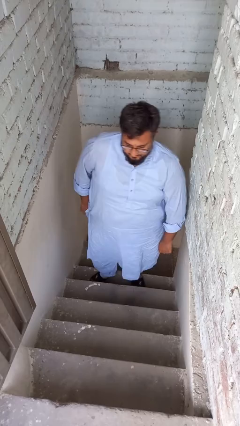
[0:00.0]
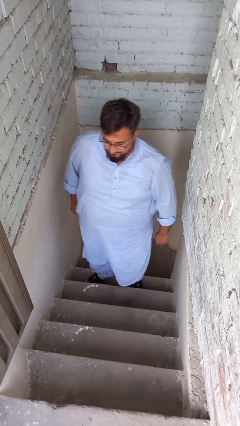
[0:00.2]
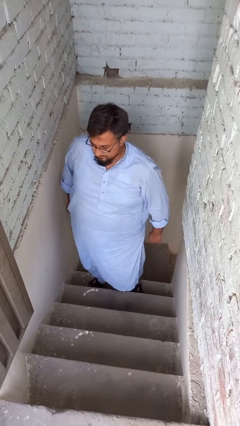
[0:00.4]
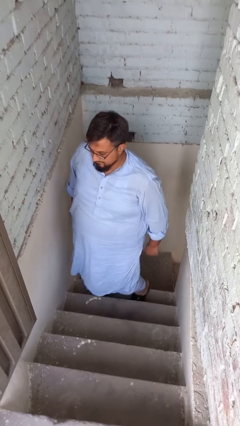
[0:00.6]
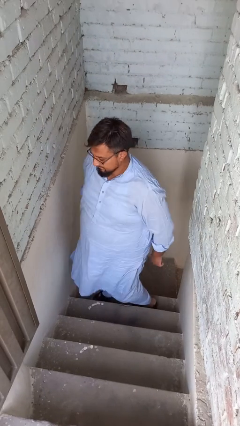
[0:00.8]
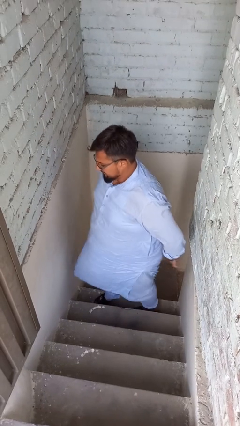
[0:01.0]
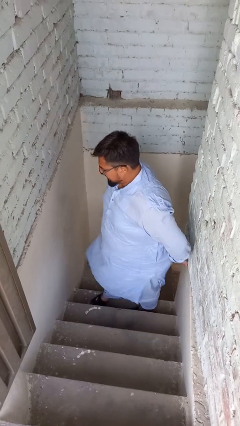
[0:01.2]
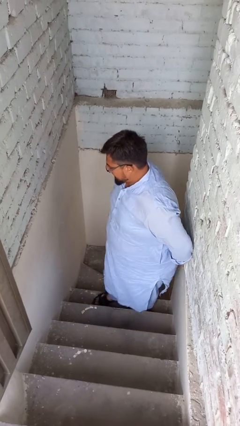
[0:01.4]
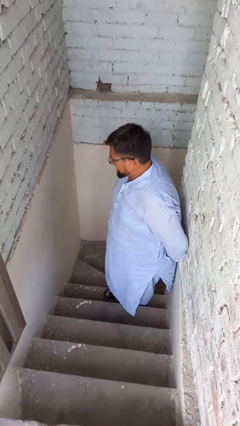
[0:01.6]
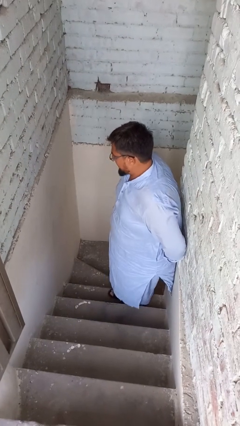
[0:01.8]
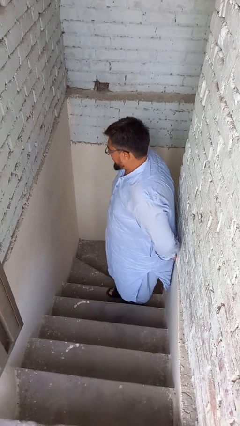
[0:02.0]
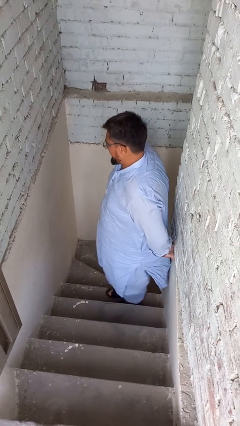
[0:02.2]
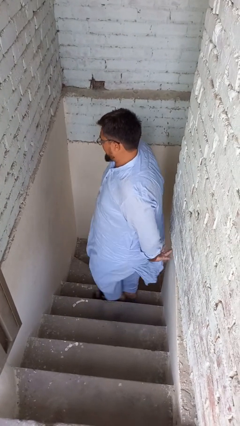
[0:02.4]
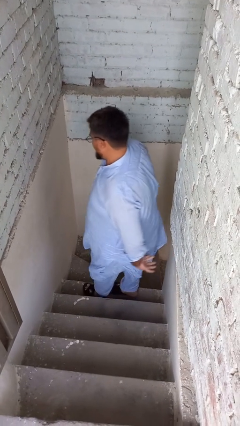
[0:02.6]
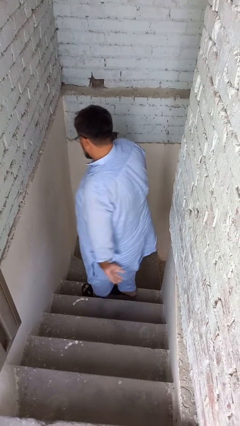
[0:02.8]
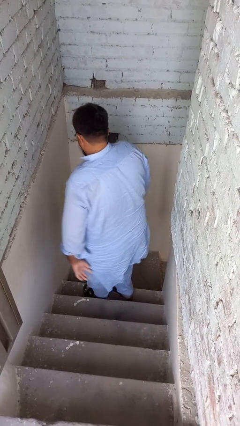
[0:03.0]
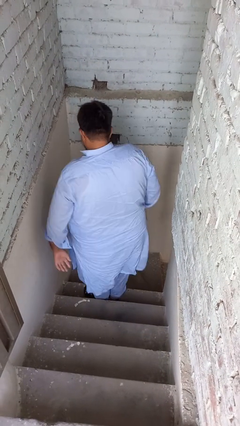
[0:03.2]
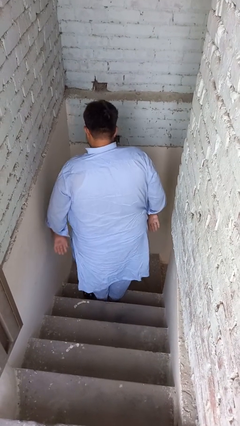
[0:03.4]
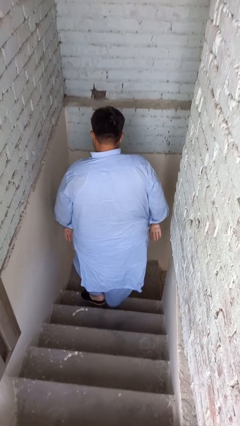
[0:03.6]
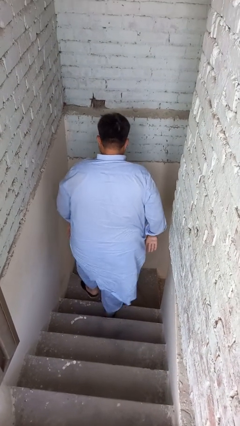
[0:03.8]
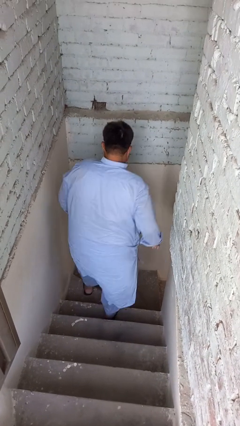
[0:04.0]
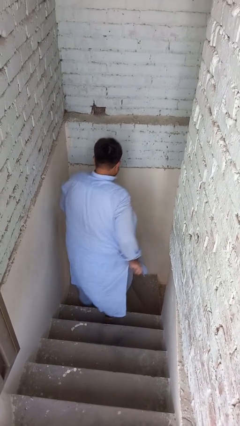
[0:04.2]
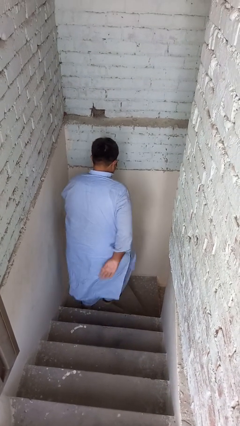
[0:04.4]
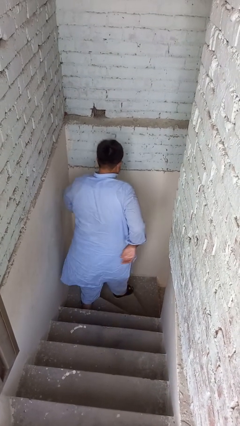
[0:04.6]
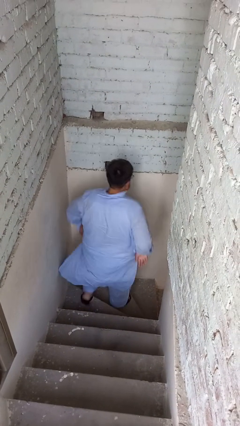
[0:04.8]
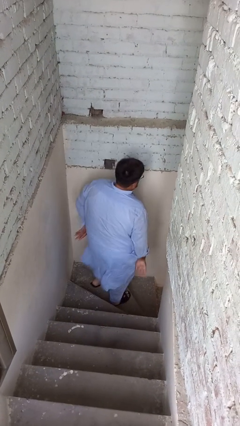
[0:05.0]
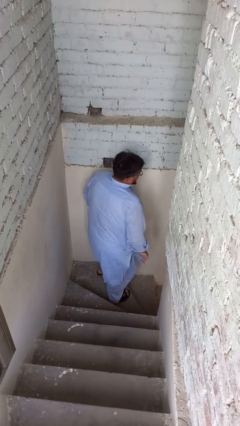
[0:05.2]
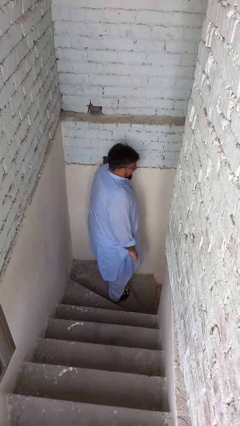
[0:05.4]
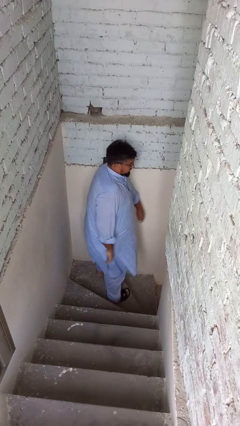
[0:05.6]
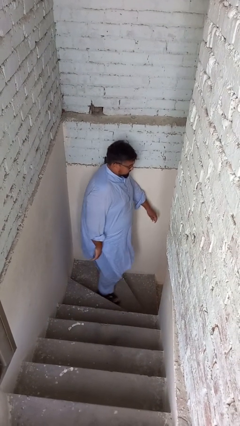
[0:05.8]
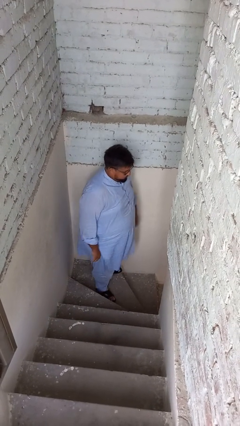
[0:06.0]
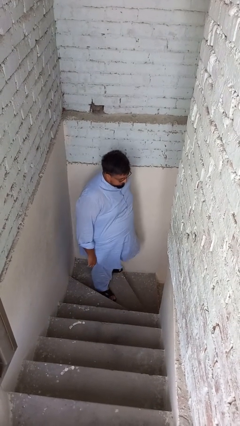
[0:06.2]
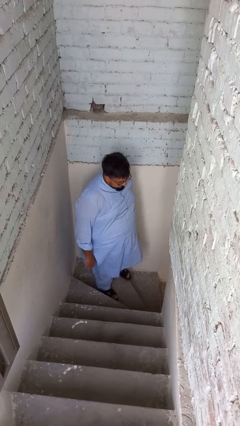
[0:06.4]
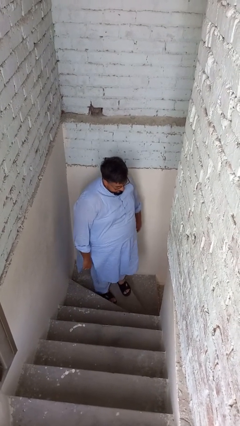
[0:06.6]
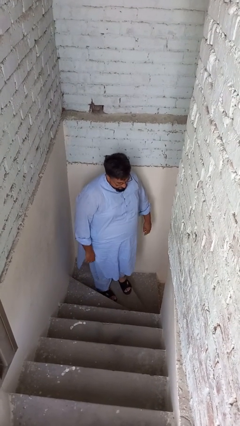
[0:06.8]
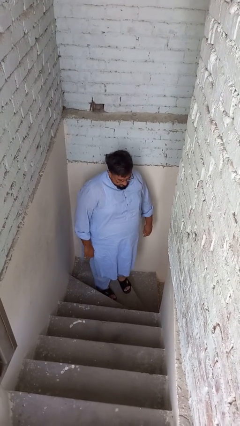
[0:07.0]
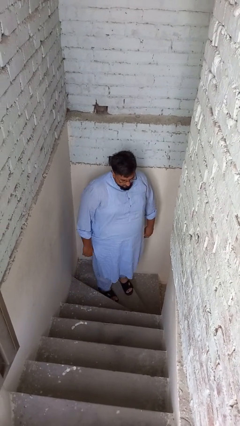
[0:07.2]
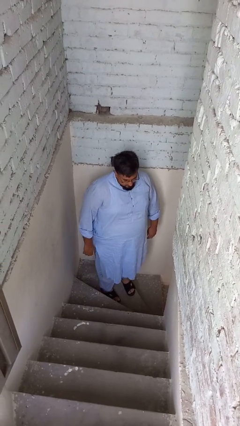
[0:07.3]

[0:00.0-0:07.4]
person climbs down stairs

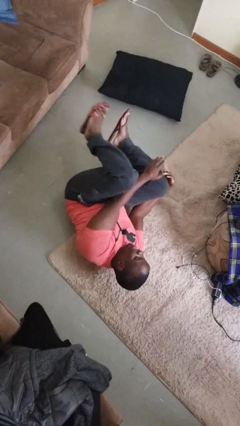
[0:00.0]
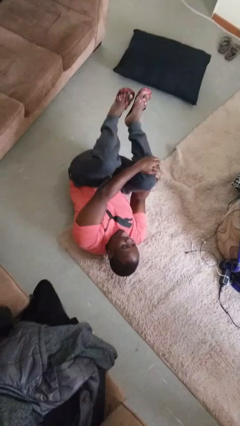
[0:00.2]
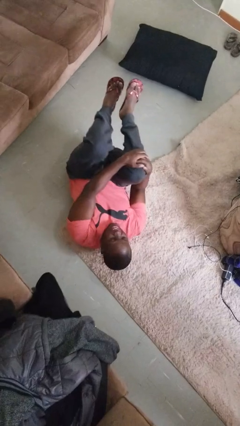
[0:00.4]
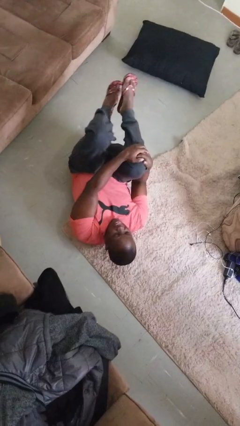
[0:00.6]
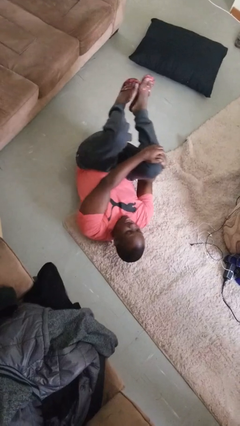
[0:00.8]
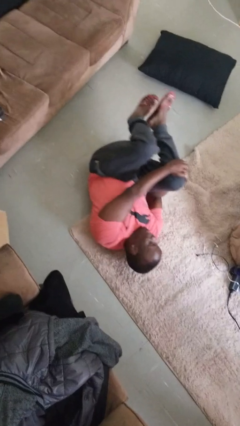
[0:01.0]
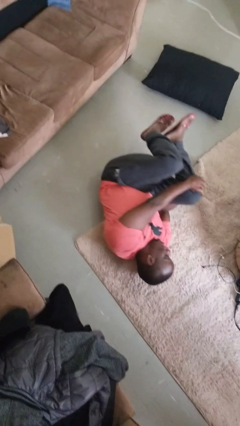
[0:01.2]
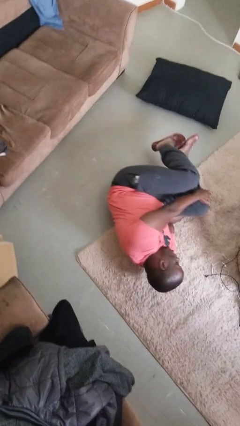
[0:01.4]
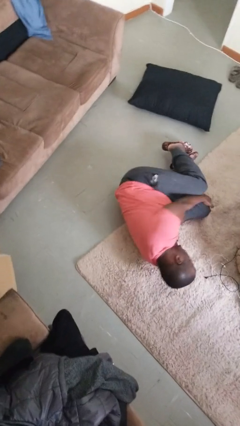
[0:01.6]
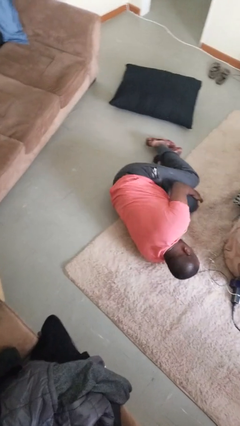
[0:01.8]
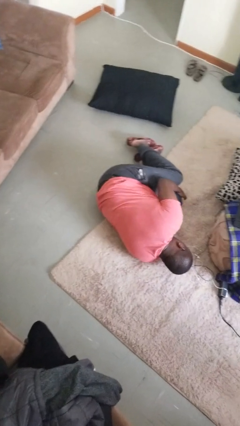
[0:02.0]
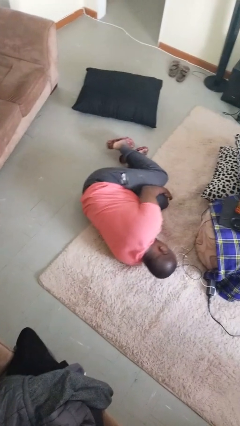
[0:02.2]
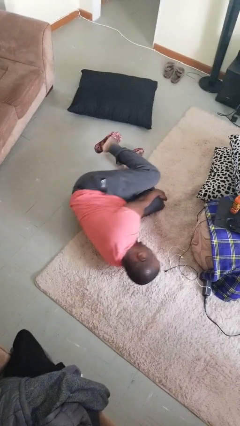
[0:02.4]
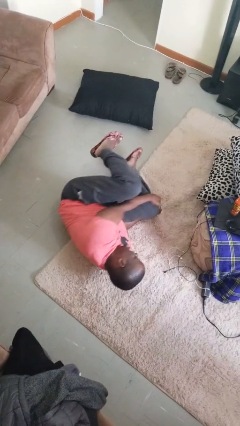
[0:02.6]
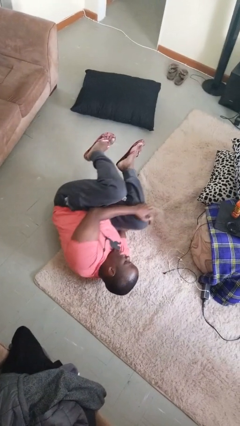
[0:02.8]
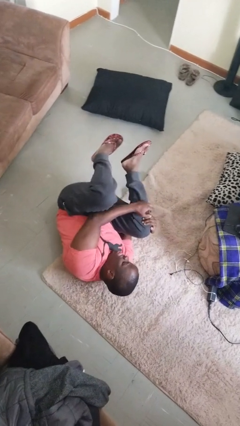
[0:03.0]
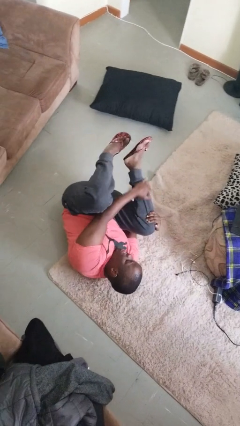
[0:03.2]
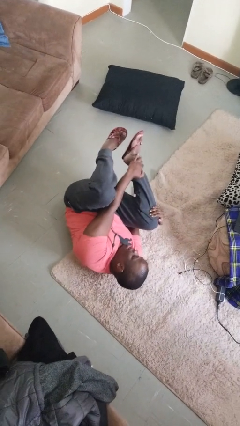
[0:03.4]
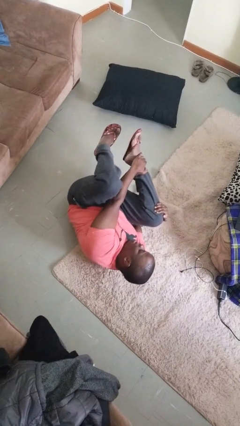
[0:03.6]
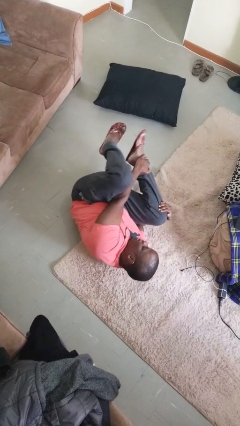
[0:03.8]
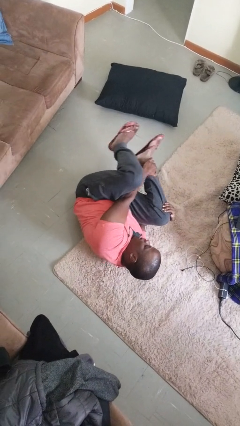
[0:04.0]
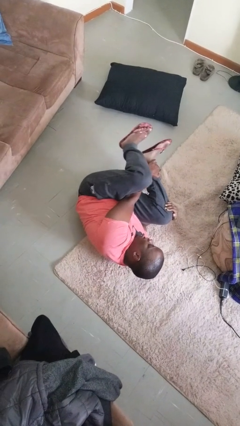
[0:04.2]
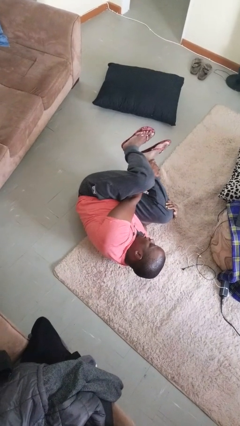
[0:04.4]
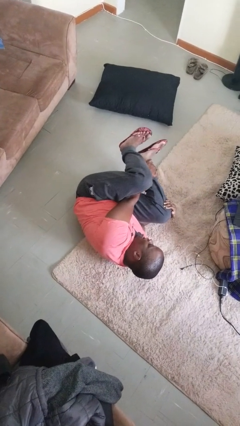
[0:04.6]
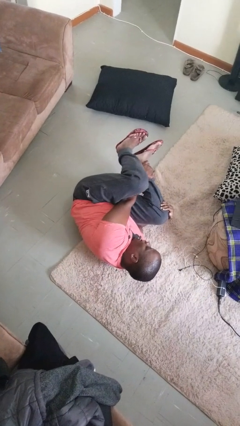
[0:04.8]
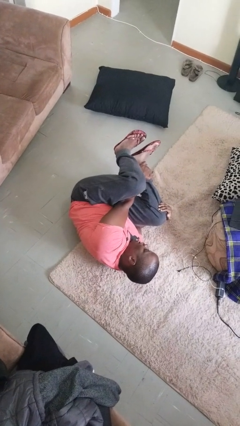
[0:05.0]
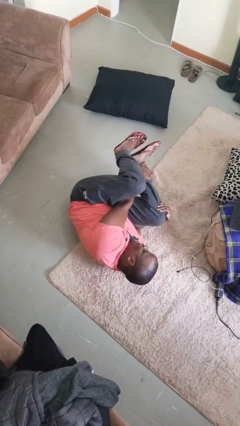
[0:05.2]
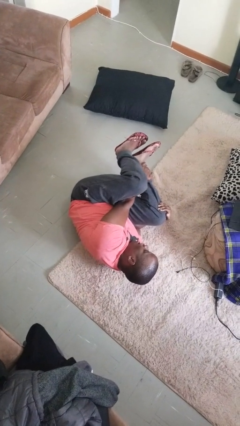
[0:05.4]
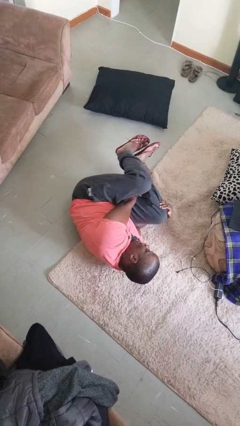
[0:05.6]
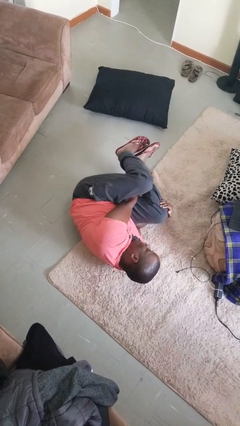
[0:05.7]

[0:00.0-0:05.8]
person lies down on floor

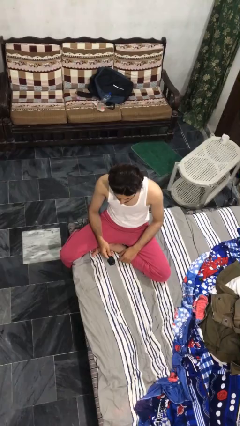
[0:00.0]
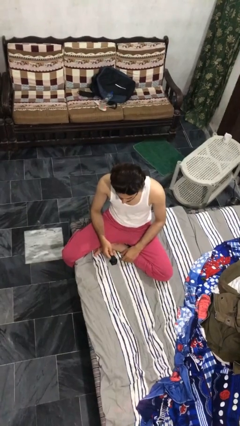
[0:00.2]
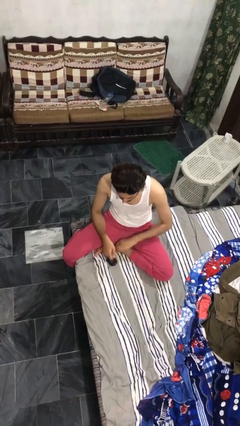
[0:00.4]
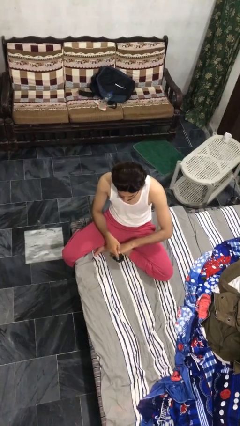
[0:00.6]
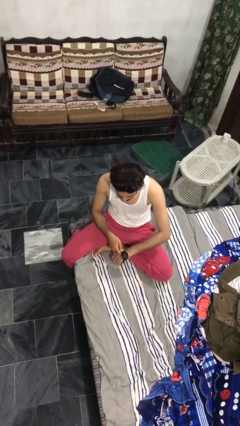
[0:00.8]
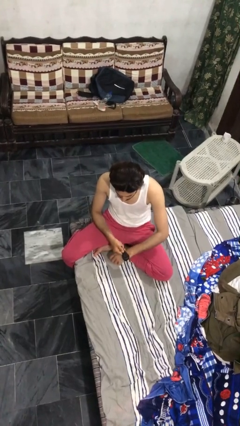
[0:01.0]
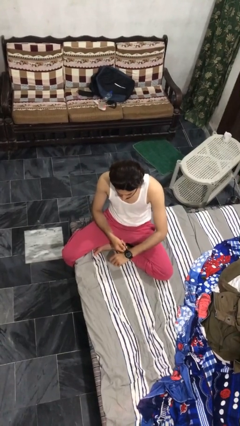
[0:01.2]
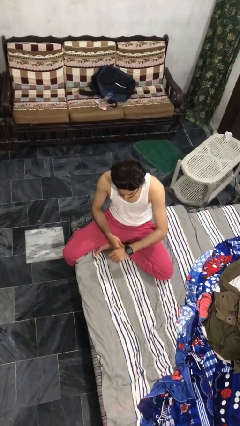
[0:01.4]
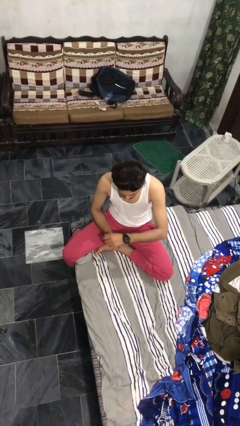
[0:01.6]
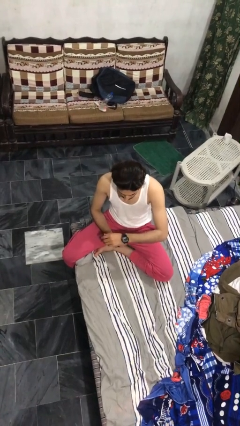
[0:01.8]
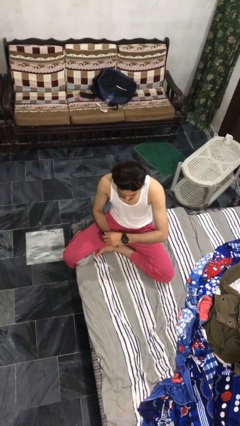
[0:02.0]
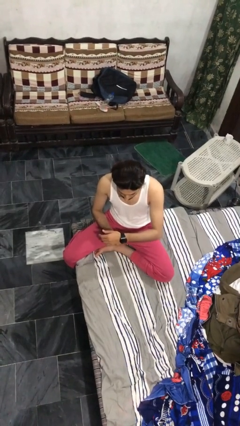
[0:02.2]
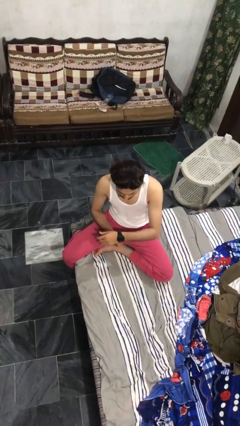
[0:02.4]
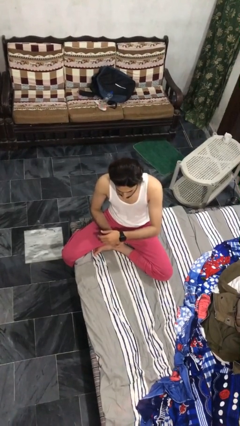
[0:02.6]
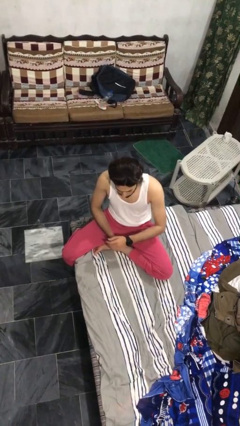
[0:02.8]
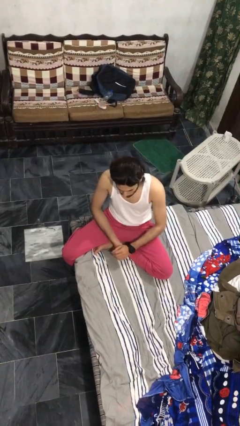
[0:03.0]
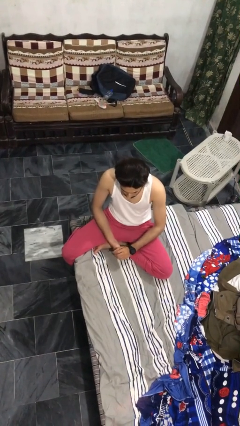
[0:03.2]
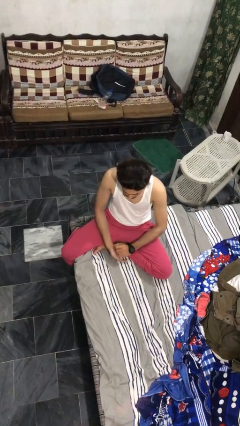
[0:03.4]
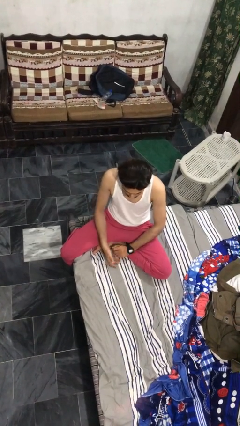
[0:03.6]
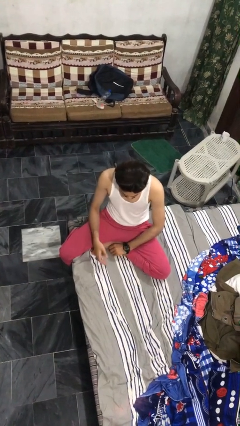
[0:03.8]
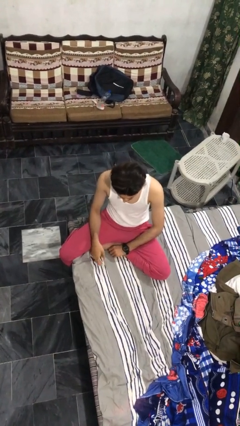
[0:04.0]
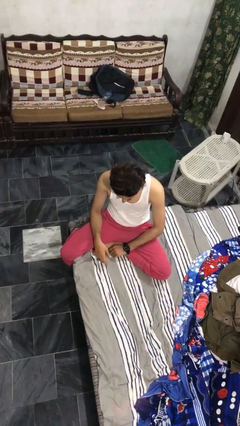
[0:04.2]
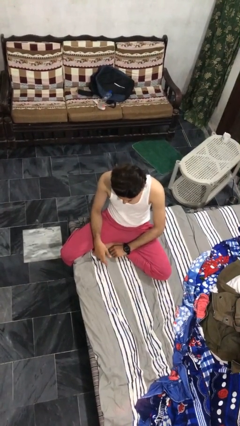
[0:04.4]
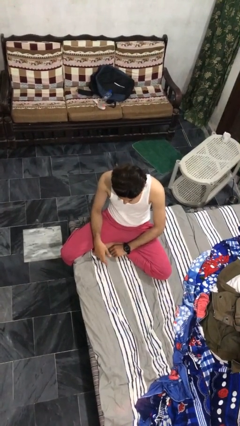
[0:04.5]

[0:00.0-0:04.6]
person puts on wristwatch

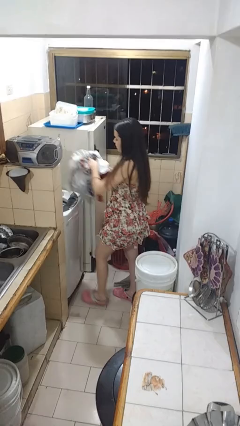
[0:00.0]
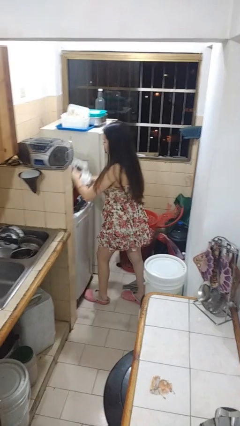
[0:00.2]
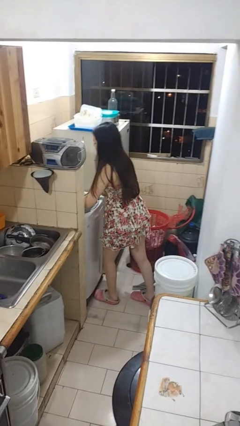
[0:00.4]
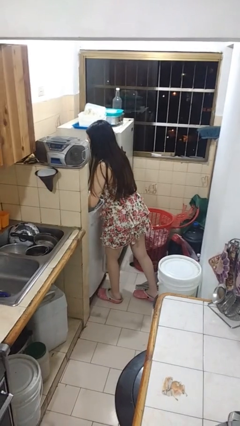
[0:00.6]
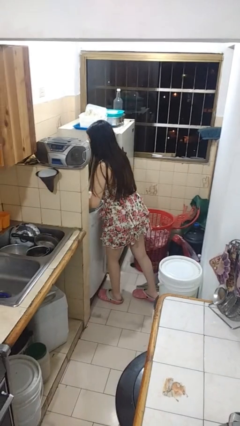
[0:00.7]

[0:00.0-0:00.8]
person loads clotheswasher
